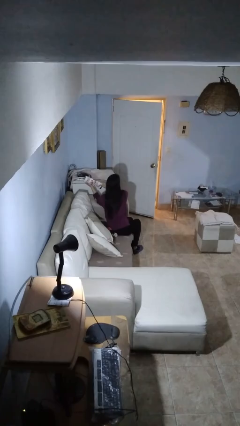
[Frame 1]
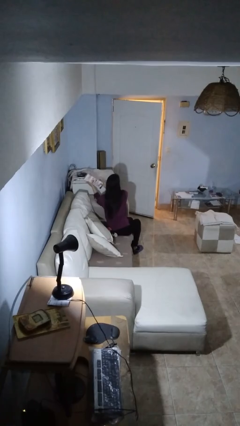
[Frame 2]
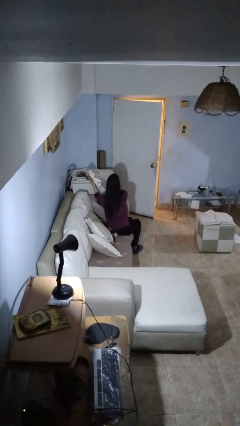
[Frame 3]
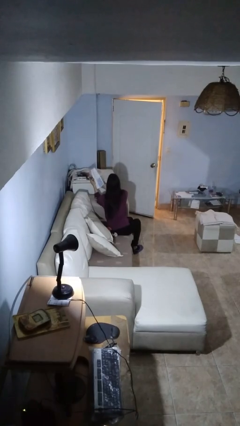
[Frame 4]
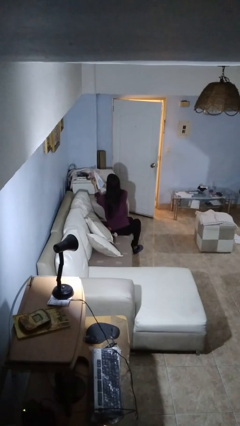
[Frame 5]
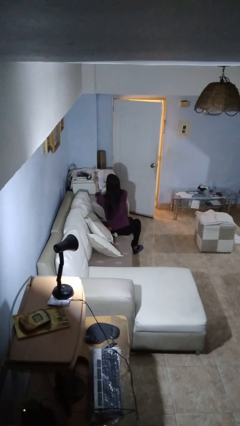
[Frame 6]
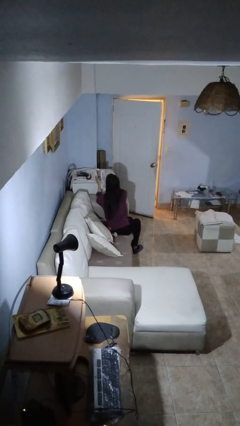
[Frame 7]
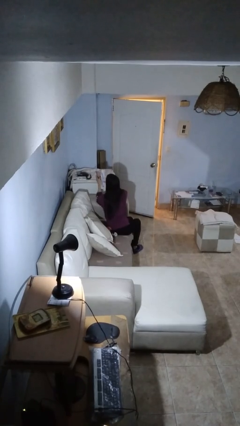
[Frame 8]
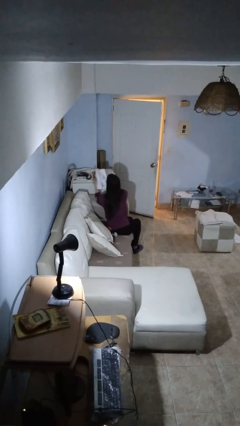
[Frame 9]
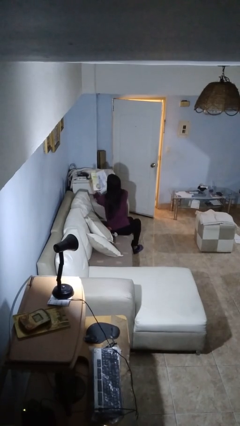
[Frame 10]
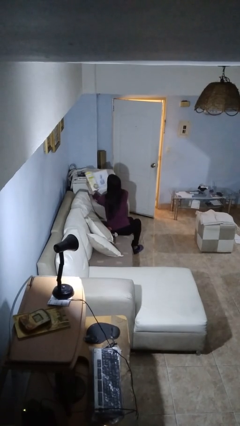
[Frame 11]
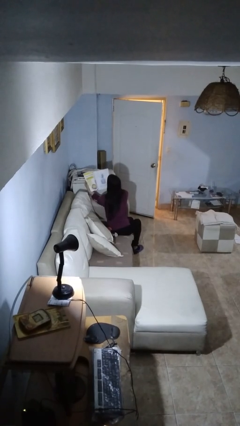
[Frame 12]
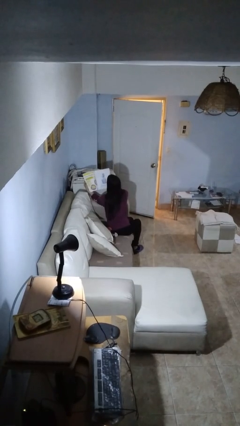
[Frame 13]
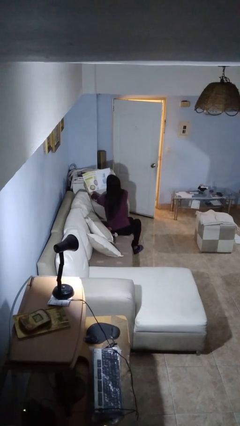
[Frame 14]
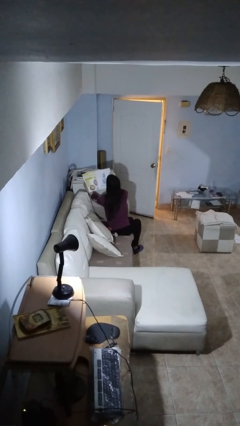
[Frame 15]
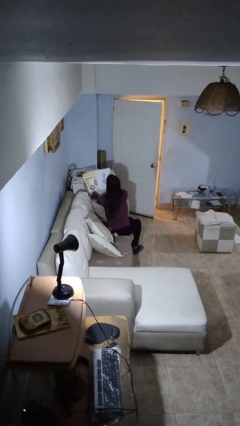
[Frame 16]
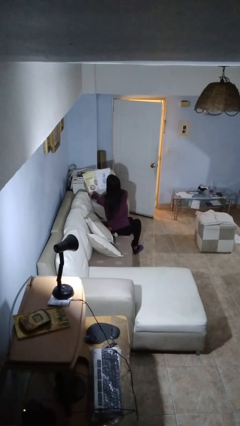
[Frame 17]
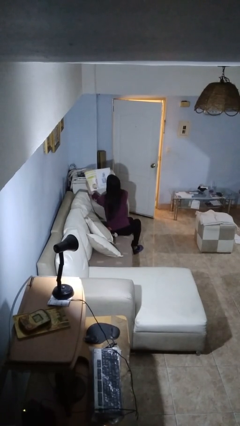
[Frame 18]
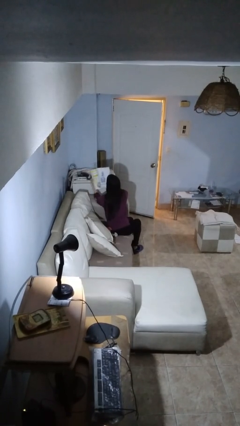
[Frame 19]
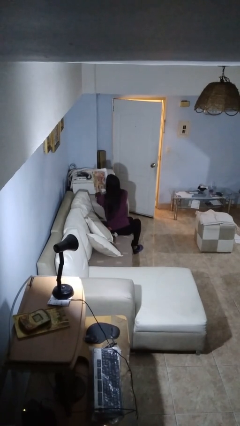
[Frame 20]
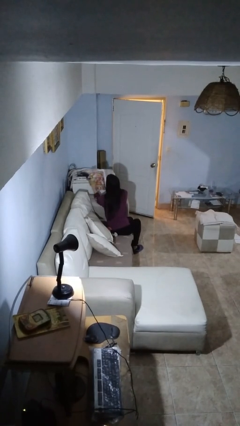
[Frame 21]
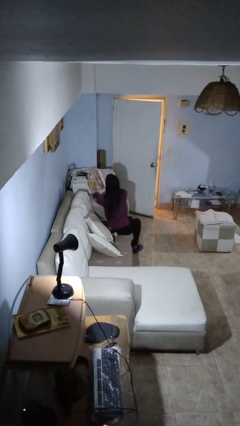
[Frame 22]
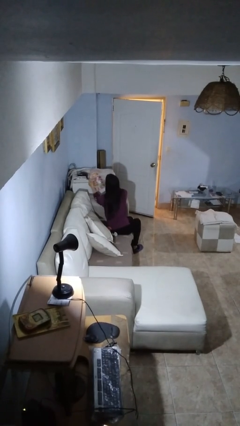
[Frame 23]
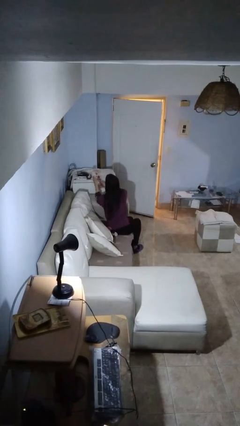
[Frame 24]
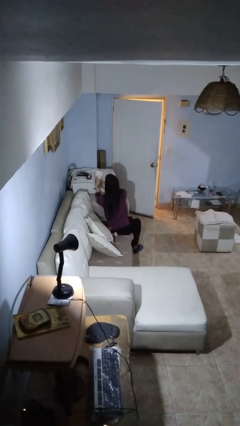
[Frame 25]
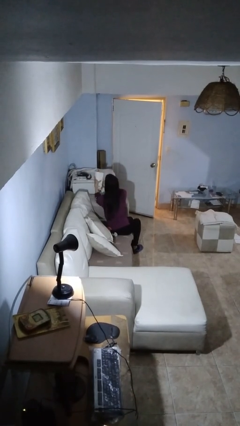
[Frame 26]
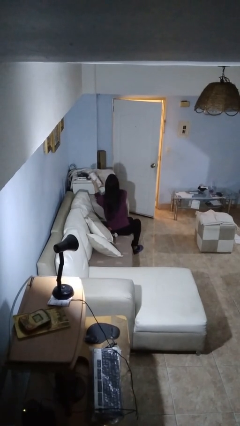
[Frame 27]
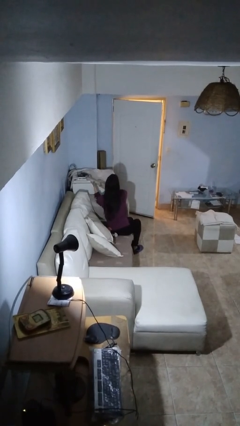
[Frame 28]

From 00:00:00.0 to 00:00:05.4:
person reads magazine

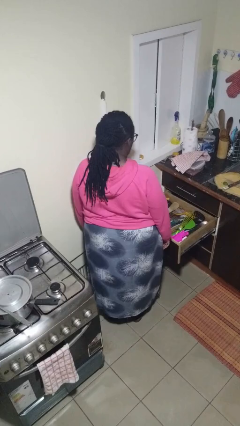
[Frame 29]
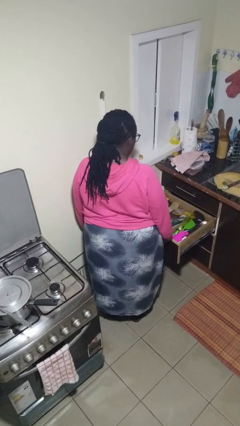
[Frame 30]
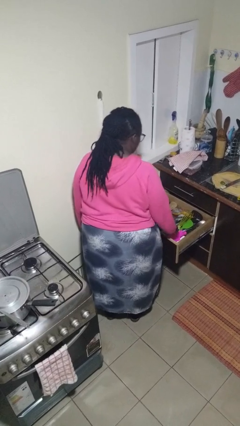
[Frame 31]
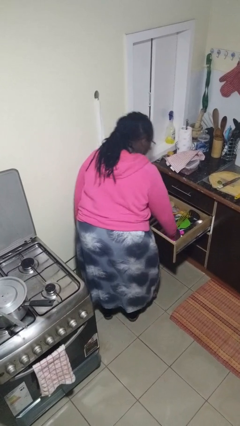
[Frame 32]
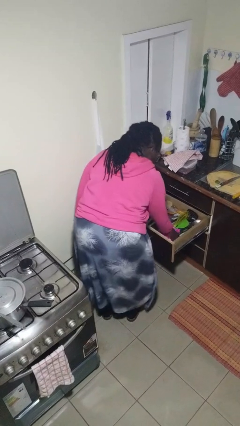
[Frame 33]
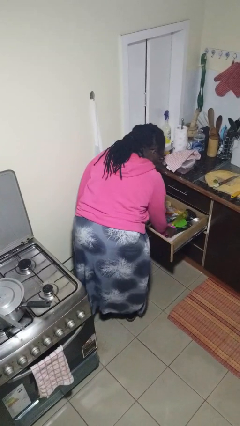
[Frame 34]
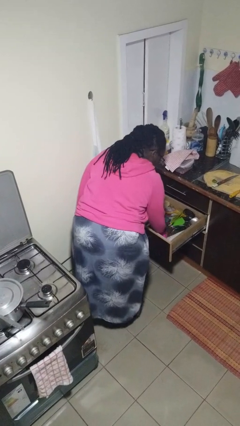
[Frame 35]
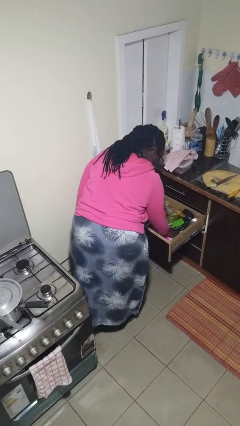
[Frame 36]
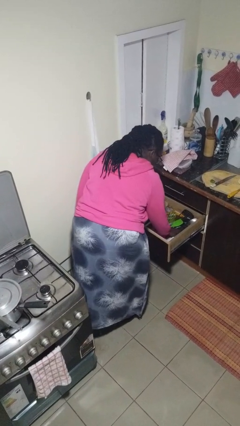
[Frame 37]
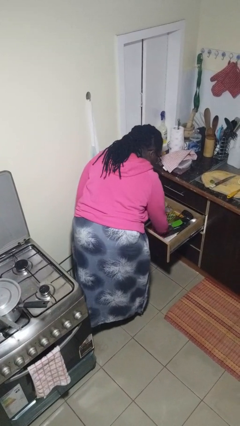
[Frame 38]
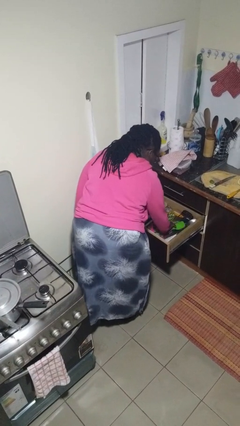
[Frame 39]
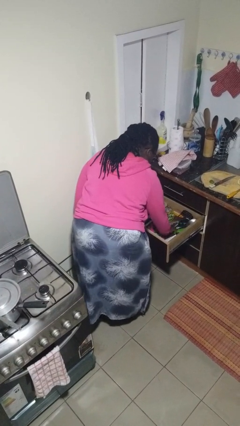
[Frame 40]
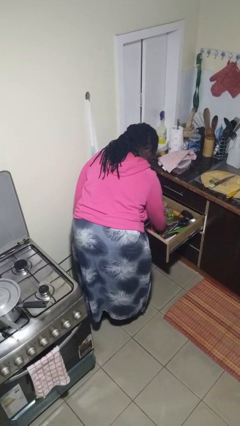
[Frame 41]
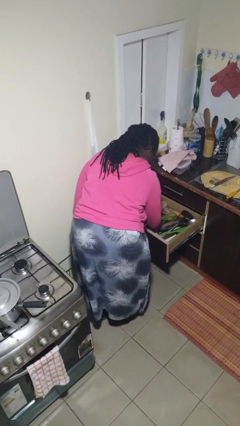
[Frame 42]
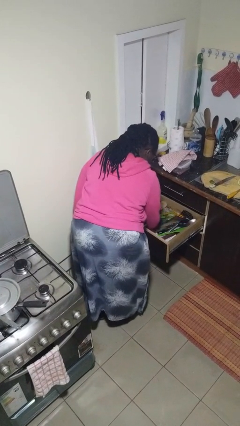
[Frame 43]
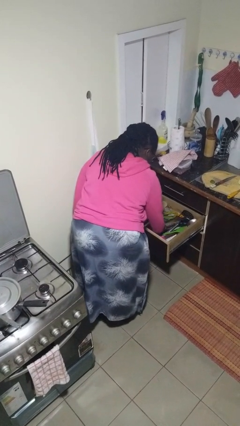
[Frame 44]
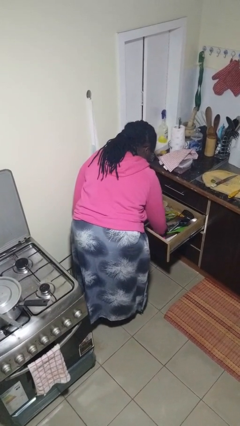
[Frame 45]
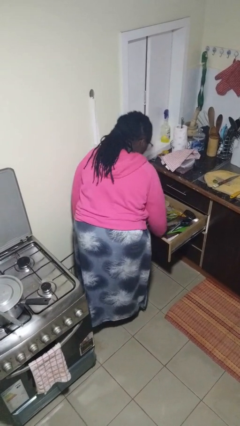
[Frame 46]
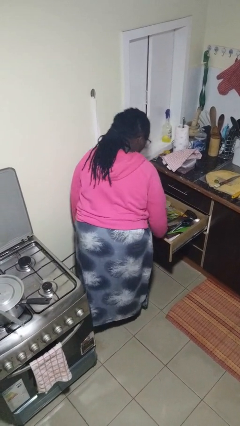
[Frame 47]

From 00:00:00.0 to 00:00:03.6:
person searches in kitchen drawer

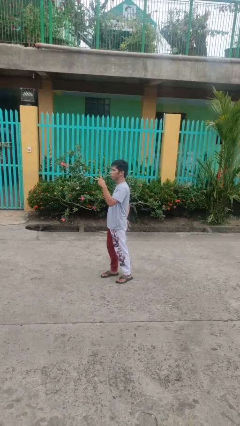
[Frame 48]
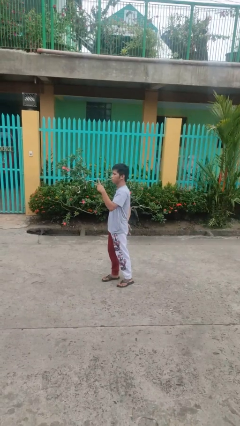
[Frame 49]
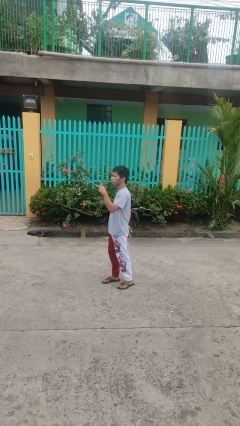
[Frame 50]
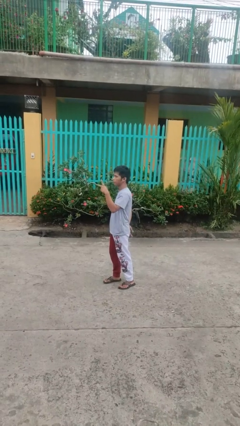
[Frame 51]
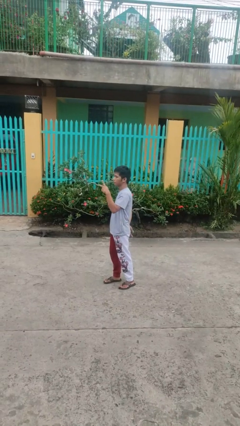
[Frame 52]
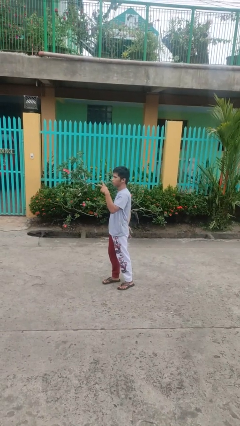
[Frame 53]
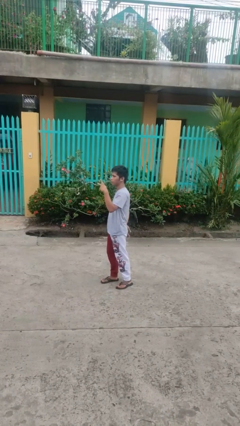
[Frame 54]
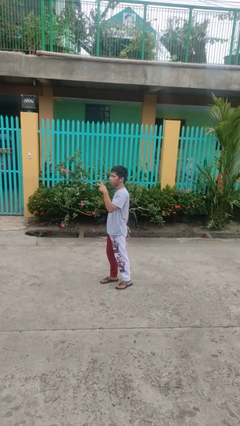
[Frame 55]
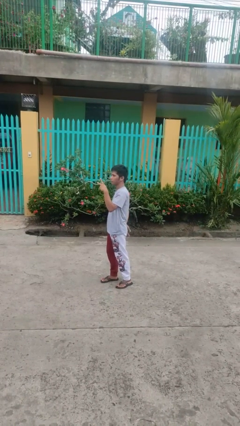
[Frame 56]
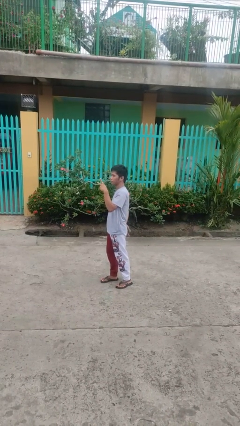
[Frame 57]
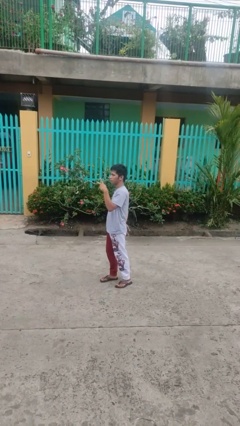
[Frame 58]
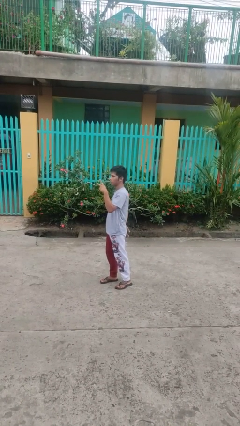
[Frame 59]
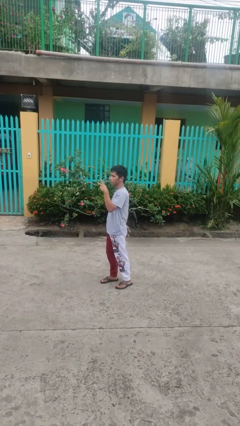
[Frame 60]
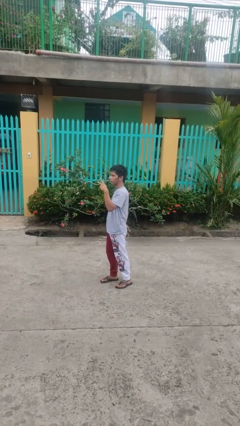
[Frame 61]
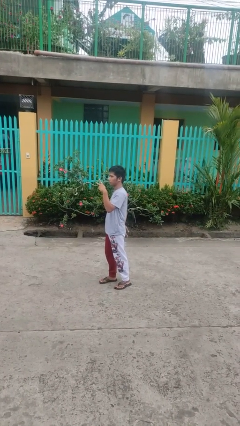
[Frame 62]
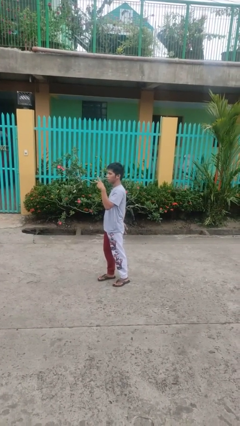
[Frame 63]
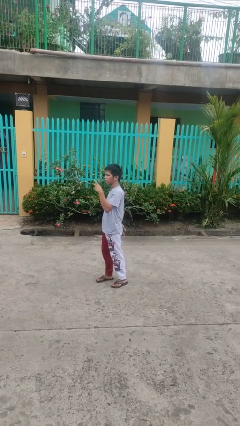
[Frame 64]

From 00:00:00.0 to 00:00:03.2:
person gestures peace

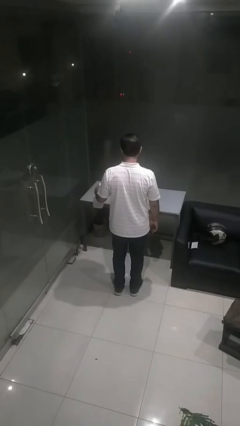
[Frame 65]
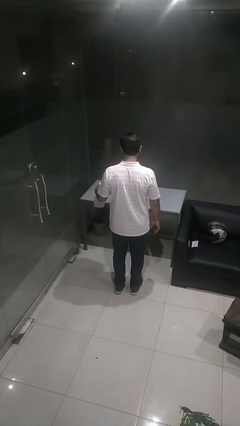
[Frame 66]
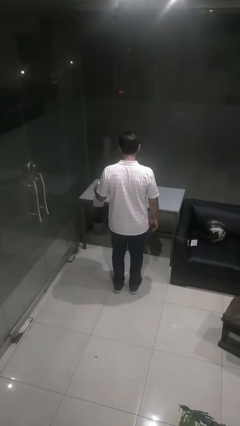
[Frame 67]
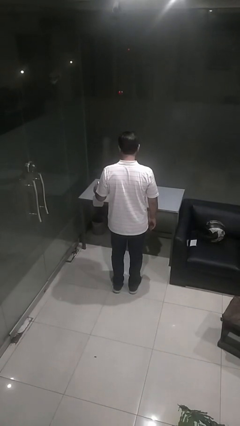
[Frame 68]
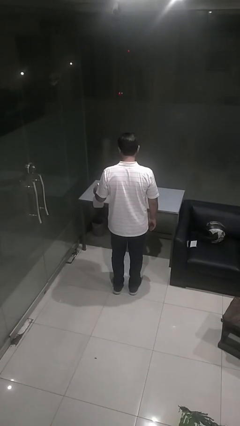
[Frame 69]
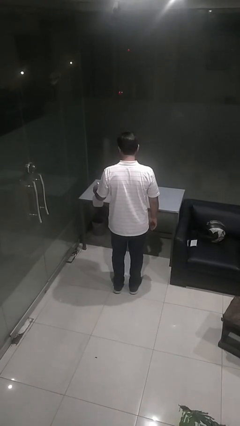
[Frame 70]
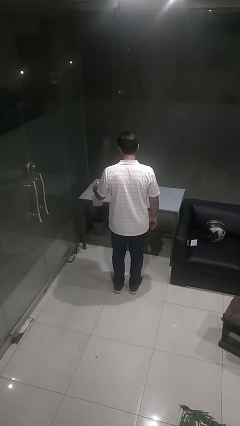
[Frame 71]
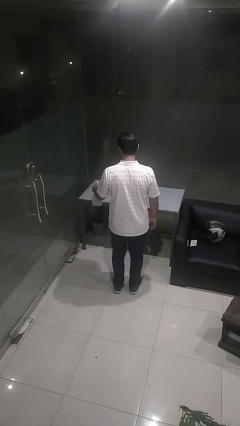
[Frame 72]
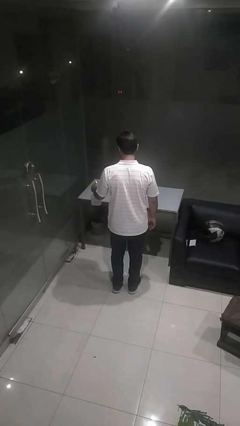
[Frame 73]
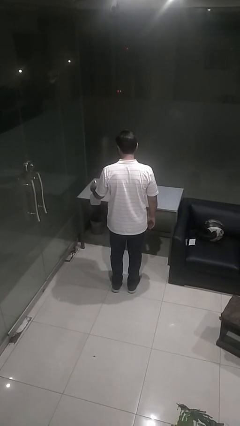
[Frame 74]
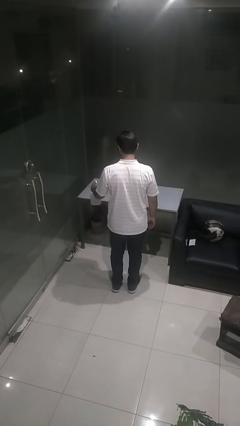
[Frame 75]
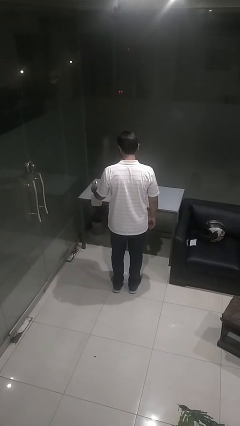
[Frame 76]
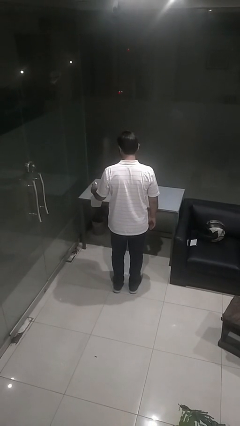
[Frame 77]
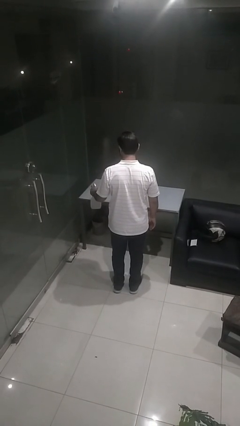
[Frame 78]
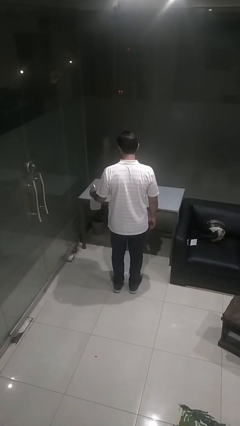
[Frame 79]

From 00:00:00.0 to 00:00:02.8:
person sprays from bottle

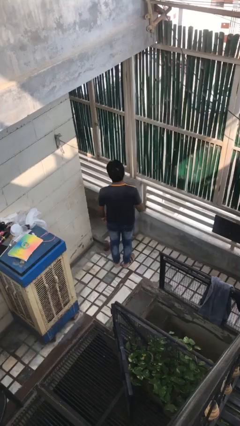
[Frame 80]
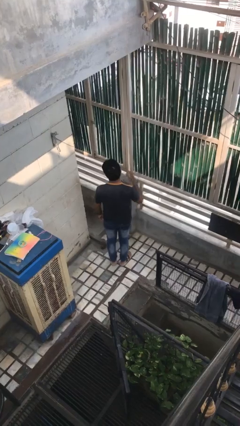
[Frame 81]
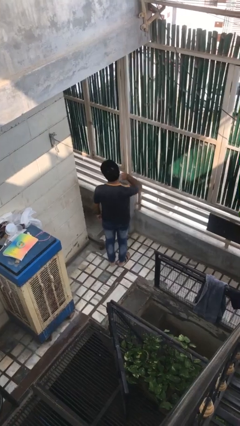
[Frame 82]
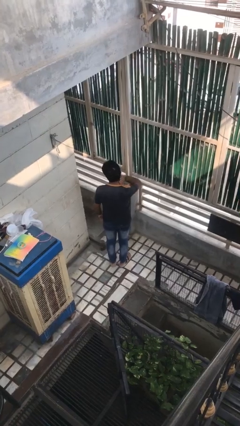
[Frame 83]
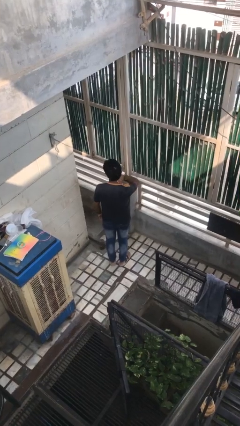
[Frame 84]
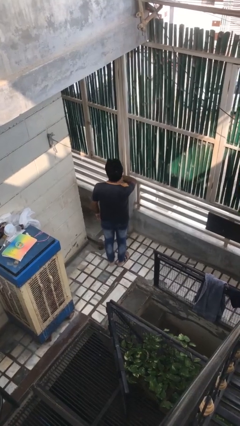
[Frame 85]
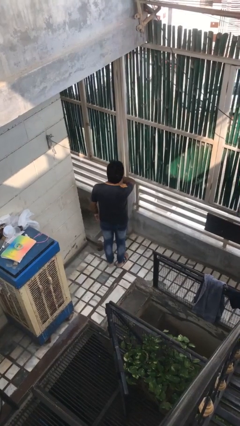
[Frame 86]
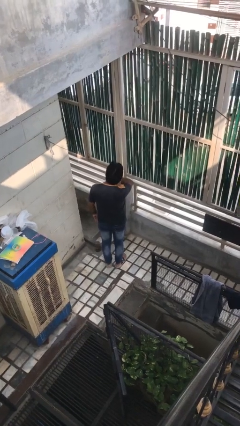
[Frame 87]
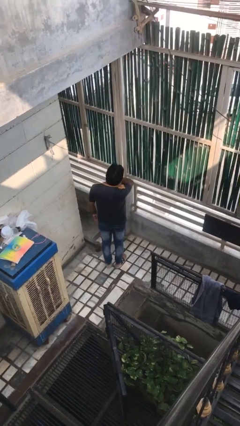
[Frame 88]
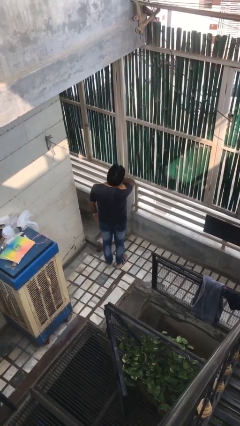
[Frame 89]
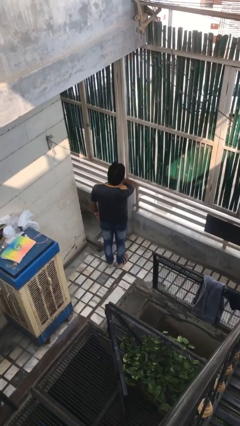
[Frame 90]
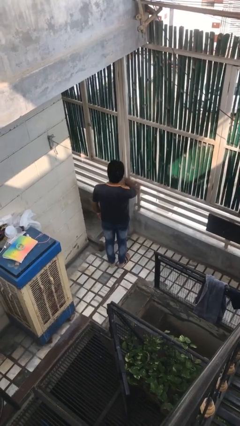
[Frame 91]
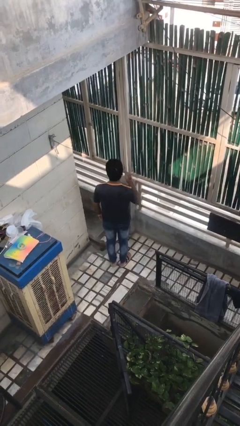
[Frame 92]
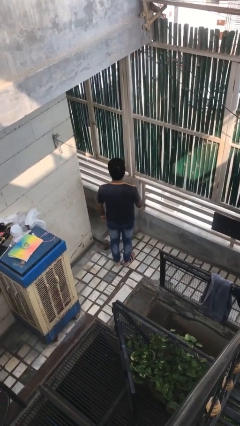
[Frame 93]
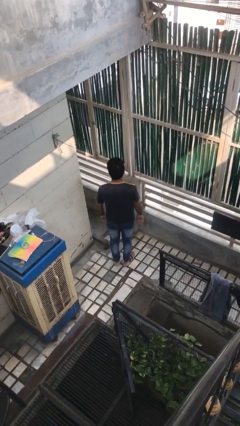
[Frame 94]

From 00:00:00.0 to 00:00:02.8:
person rubs neck
